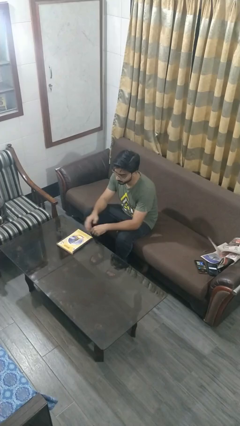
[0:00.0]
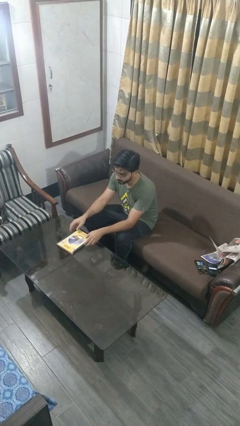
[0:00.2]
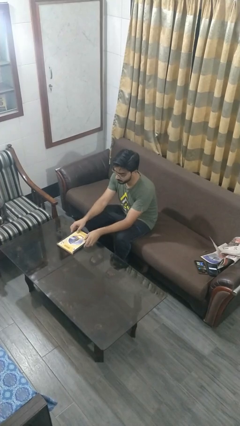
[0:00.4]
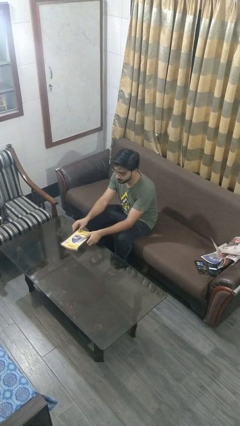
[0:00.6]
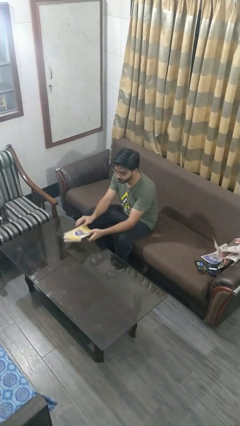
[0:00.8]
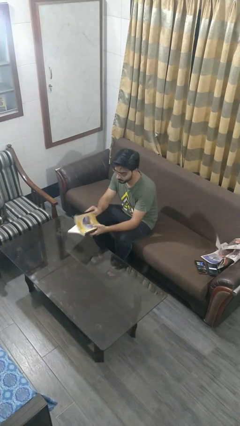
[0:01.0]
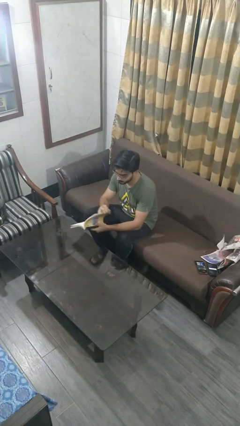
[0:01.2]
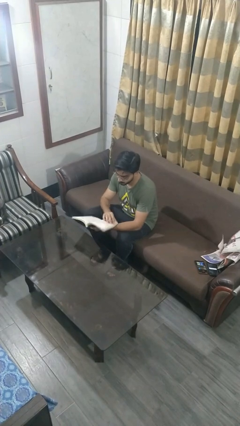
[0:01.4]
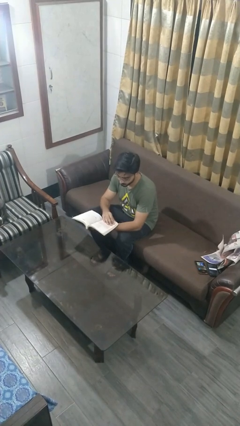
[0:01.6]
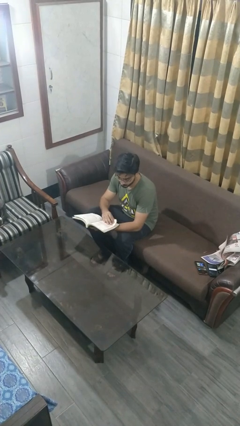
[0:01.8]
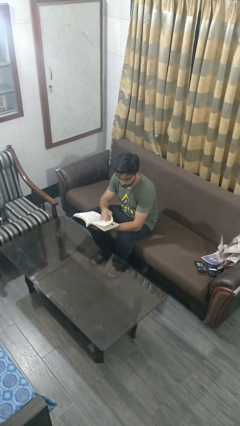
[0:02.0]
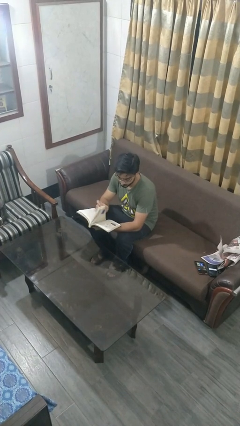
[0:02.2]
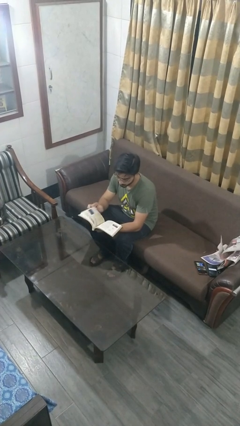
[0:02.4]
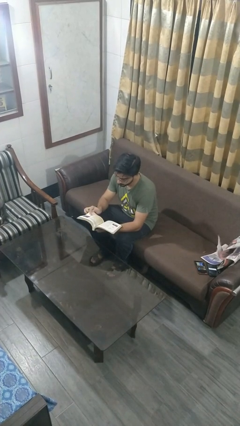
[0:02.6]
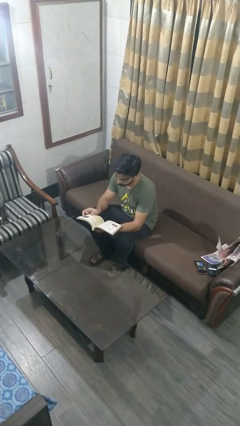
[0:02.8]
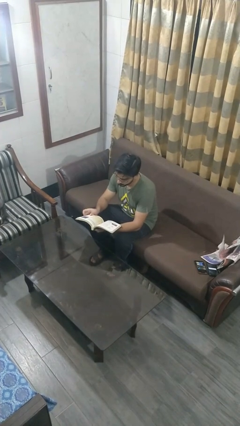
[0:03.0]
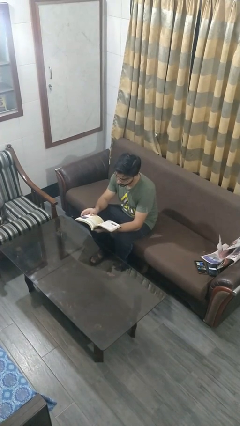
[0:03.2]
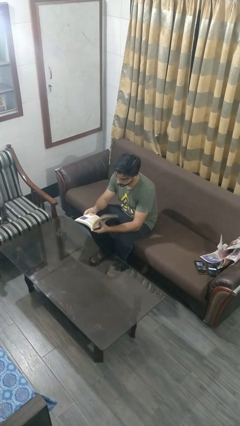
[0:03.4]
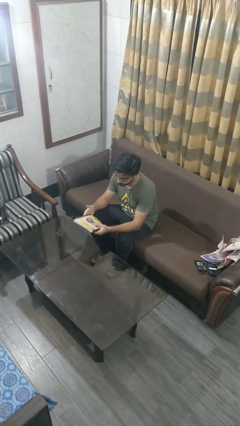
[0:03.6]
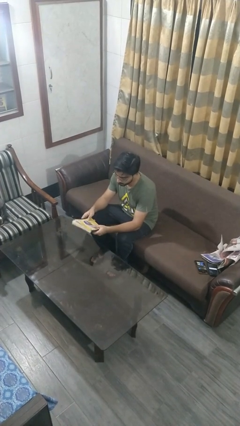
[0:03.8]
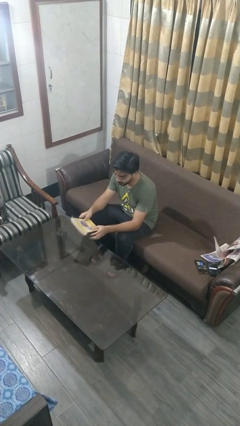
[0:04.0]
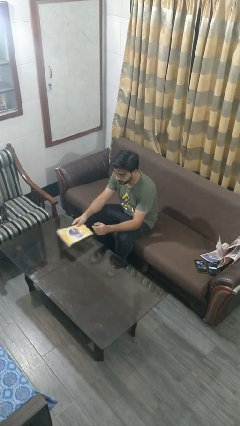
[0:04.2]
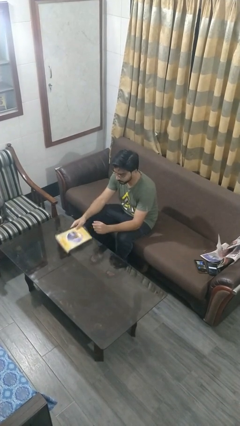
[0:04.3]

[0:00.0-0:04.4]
person reads book

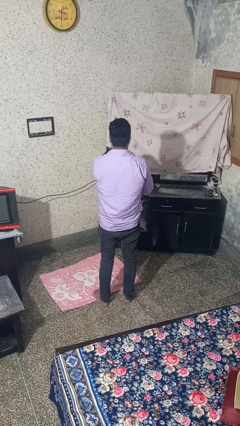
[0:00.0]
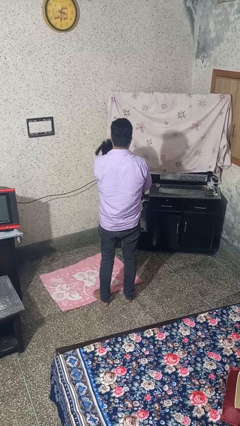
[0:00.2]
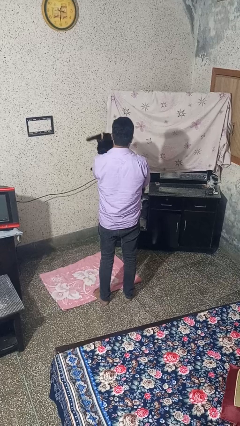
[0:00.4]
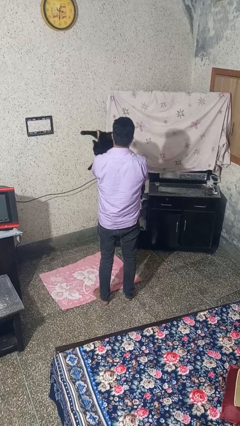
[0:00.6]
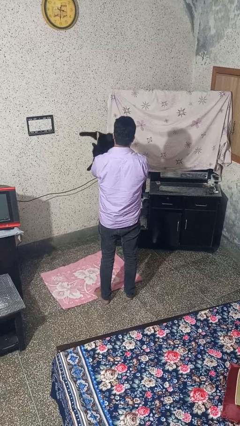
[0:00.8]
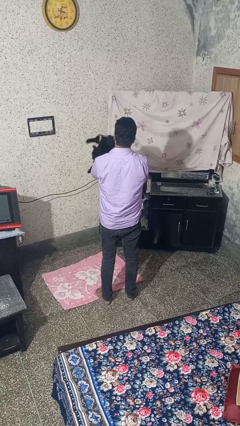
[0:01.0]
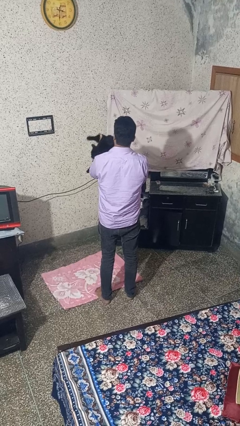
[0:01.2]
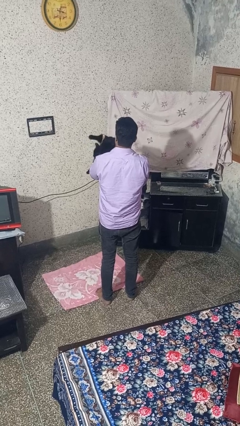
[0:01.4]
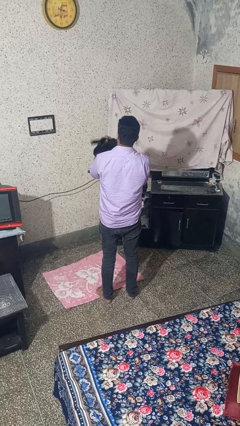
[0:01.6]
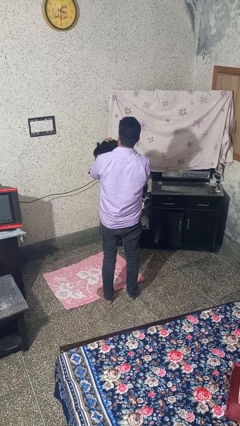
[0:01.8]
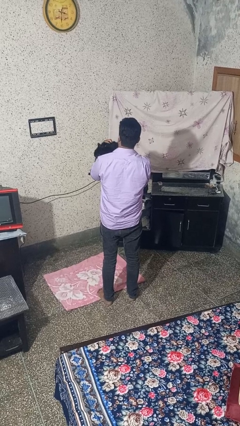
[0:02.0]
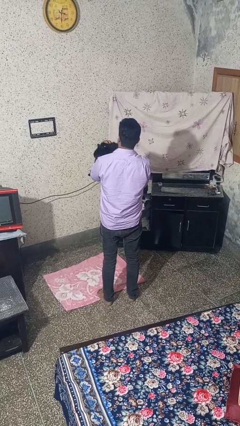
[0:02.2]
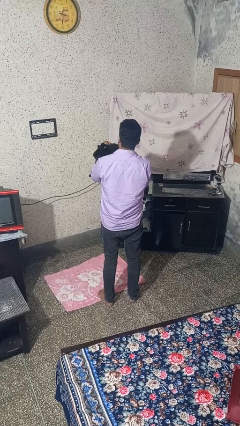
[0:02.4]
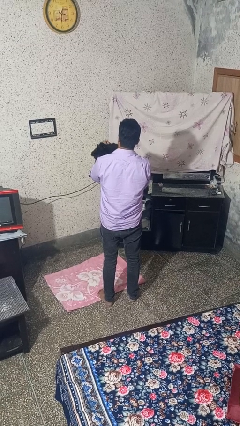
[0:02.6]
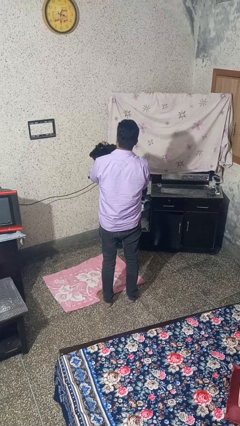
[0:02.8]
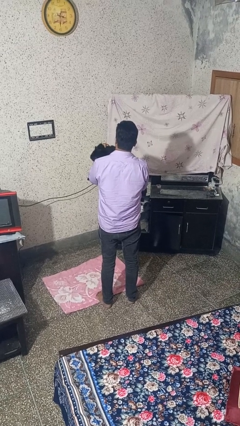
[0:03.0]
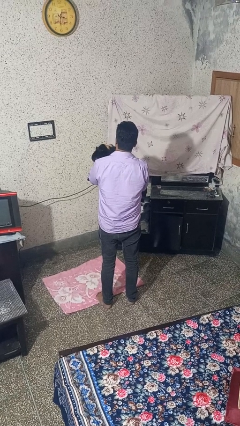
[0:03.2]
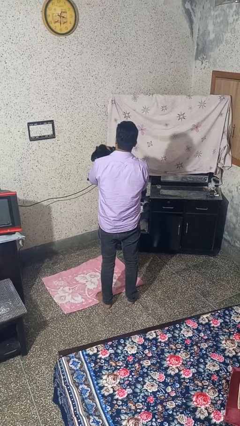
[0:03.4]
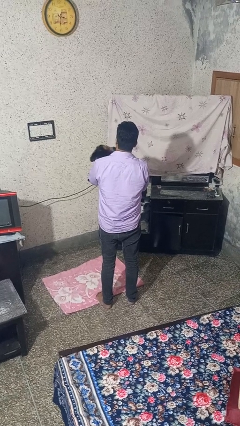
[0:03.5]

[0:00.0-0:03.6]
person hugs cat

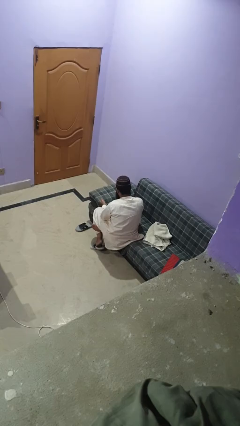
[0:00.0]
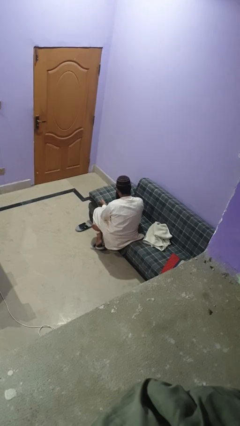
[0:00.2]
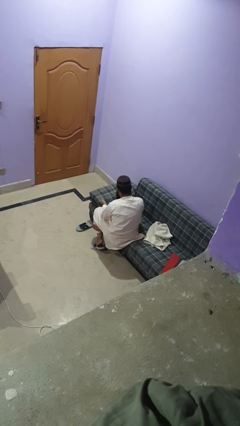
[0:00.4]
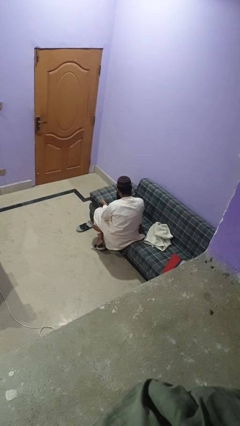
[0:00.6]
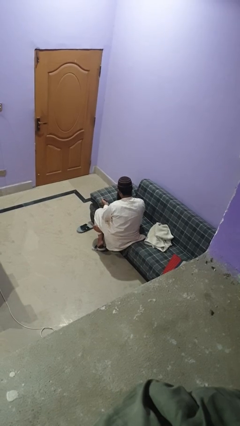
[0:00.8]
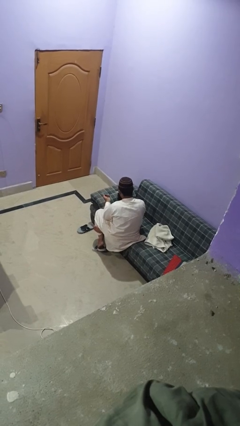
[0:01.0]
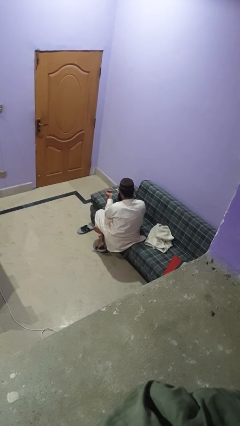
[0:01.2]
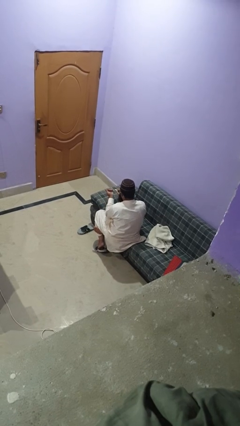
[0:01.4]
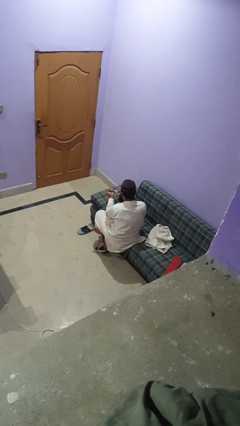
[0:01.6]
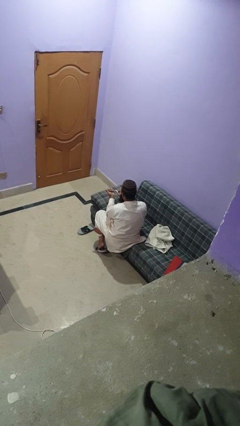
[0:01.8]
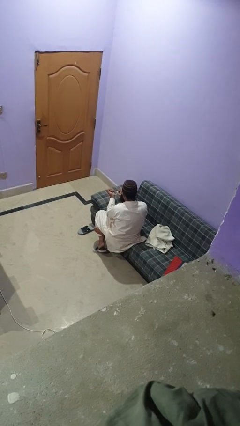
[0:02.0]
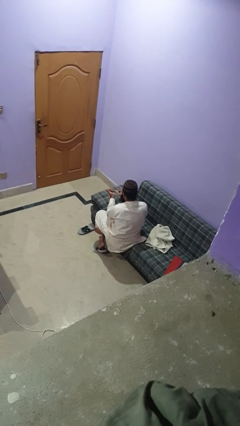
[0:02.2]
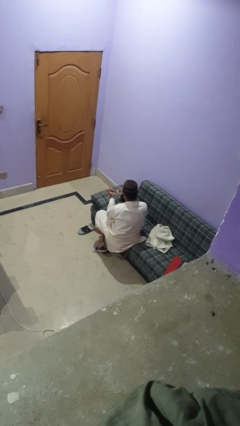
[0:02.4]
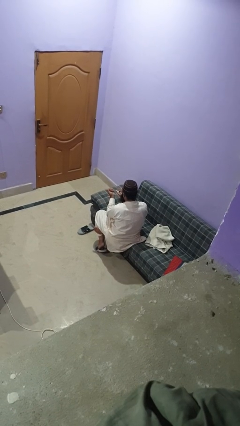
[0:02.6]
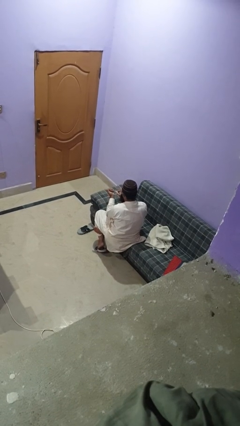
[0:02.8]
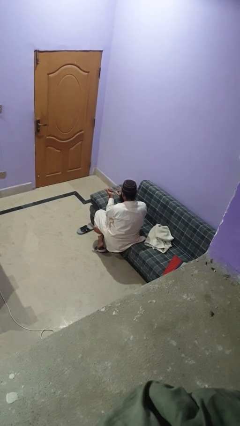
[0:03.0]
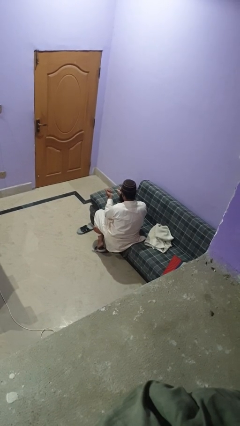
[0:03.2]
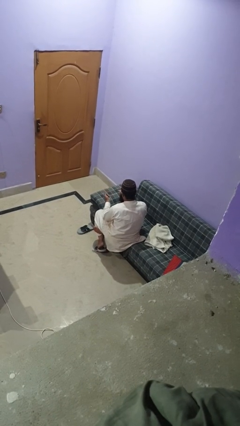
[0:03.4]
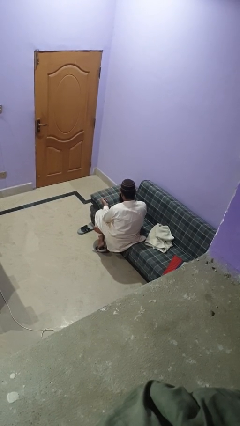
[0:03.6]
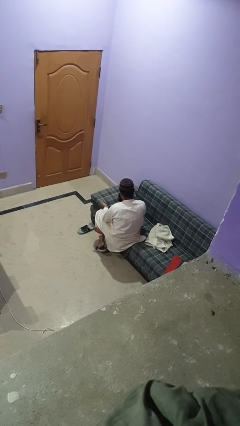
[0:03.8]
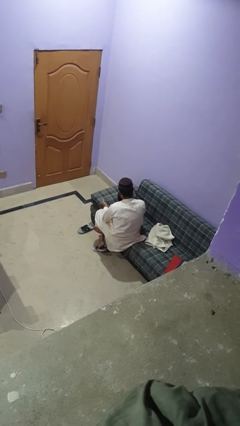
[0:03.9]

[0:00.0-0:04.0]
person paints fingernails

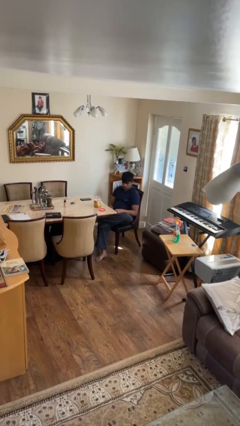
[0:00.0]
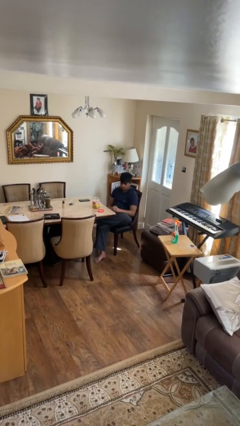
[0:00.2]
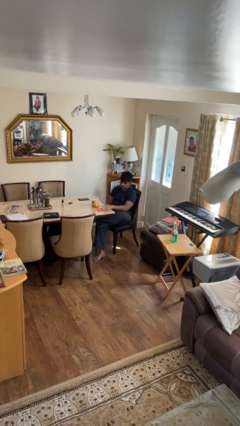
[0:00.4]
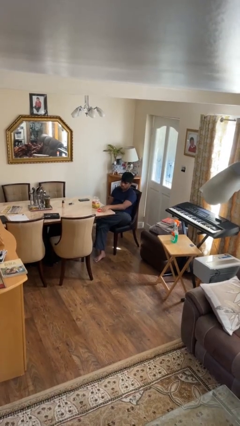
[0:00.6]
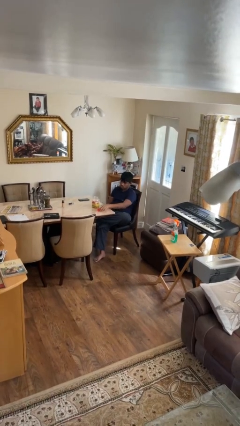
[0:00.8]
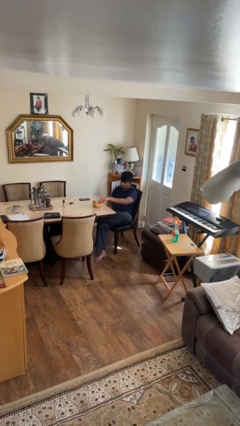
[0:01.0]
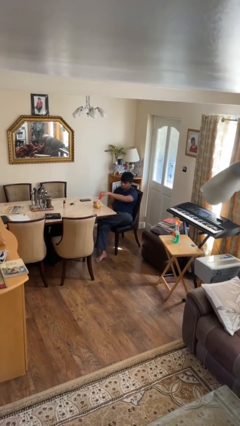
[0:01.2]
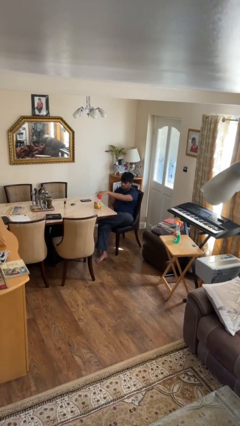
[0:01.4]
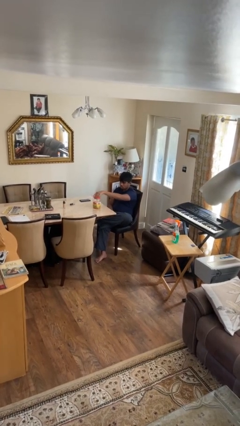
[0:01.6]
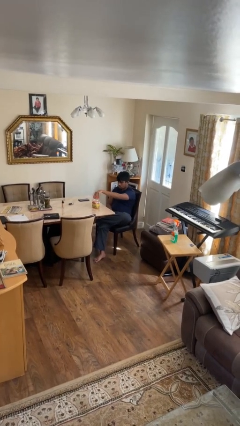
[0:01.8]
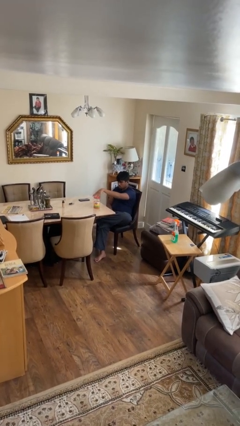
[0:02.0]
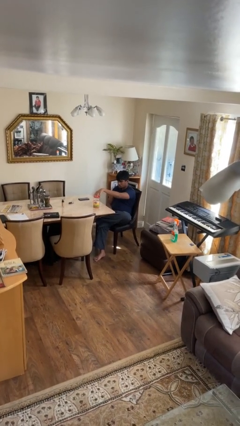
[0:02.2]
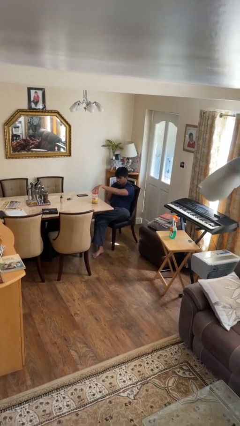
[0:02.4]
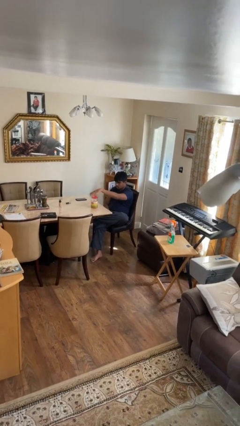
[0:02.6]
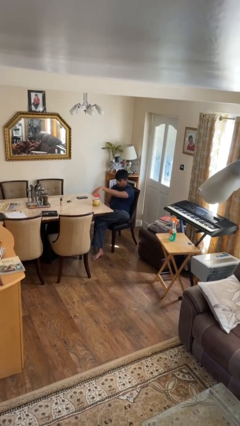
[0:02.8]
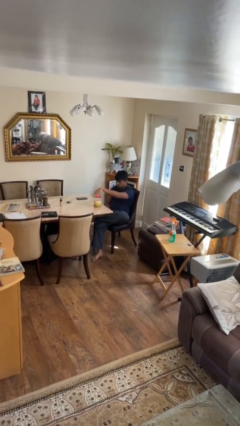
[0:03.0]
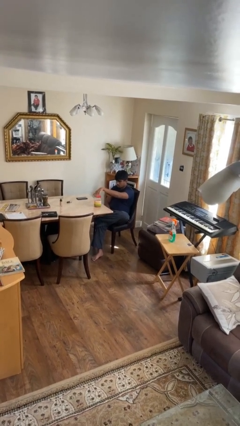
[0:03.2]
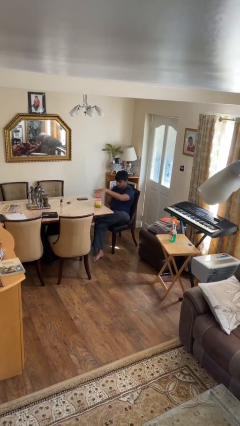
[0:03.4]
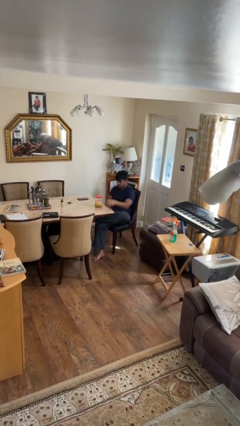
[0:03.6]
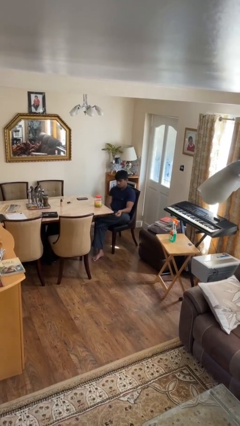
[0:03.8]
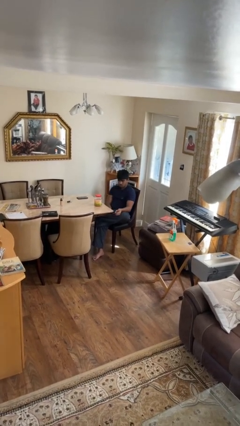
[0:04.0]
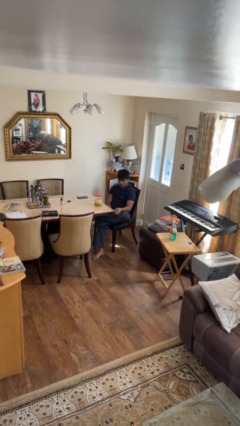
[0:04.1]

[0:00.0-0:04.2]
person closes jar

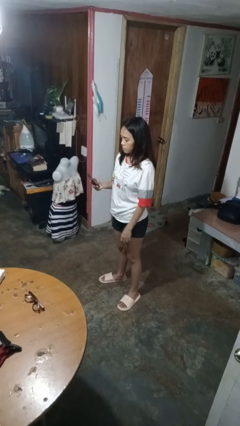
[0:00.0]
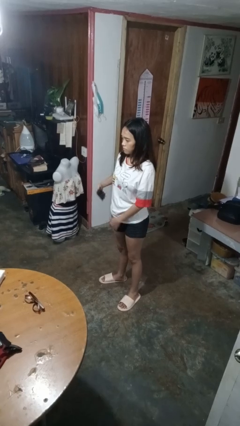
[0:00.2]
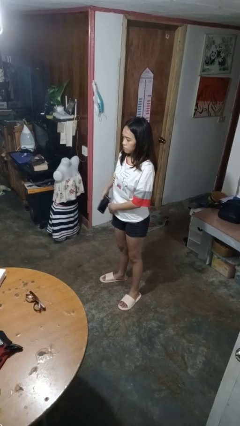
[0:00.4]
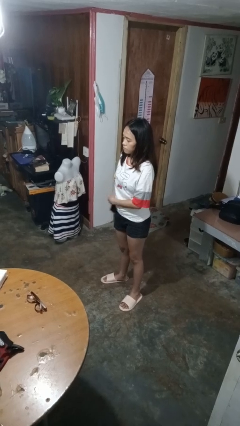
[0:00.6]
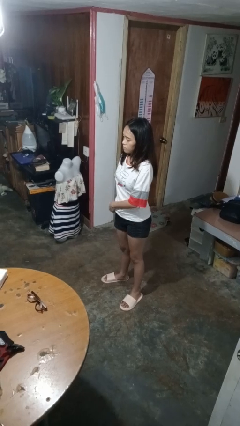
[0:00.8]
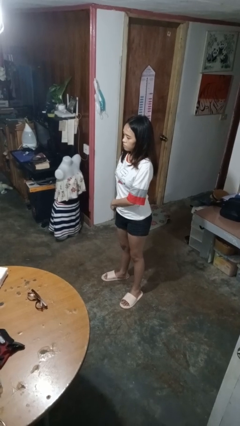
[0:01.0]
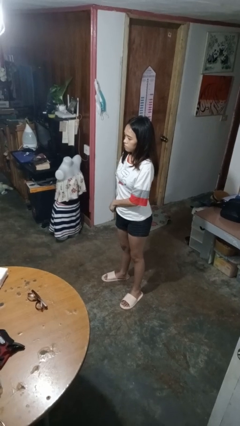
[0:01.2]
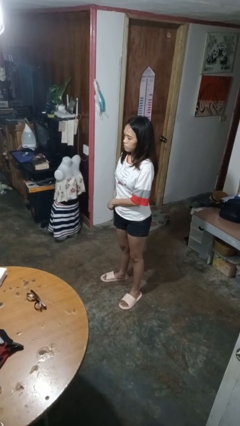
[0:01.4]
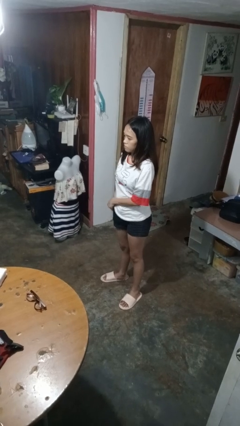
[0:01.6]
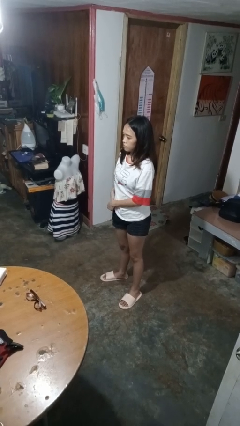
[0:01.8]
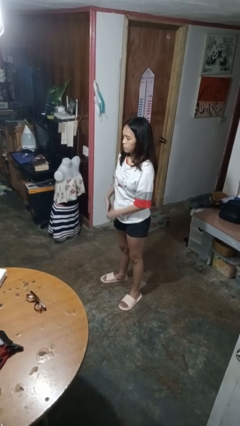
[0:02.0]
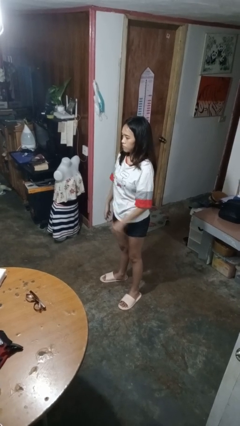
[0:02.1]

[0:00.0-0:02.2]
person puts phone into pocket
